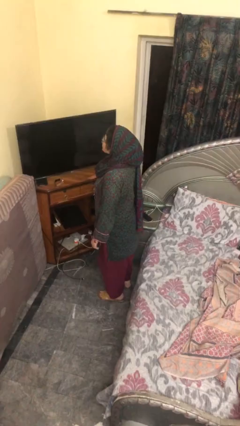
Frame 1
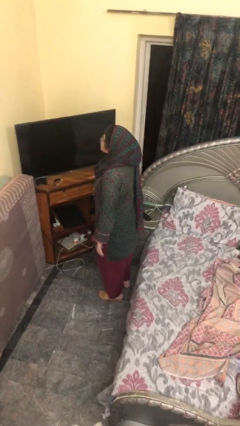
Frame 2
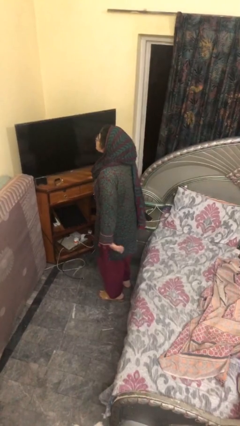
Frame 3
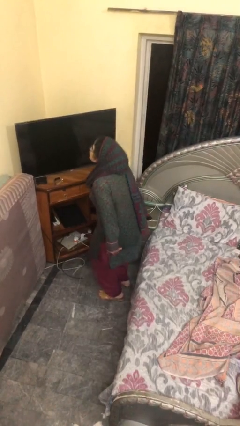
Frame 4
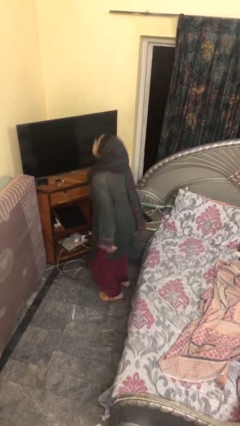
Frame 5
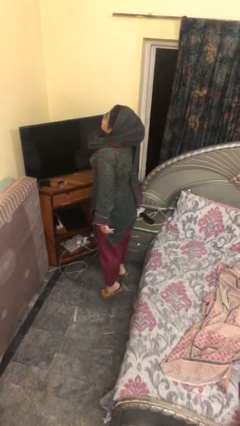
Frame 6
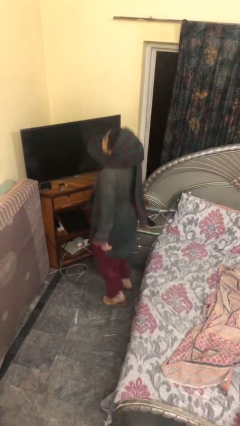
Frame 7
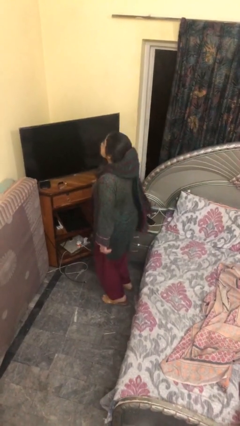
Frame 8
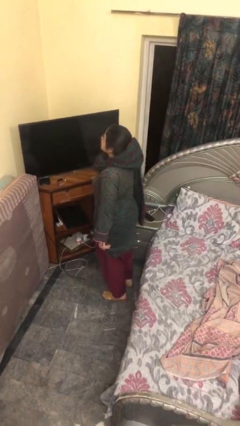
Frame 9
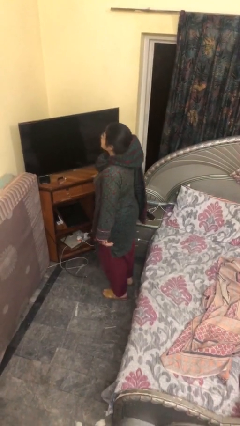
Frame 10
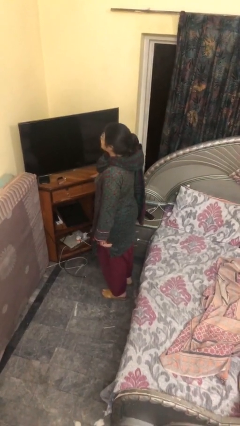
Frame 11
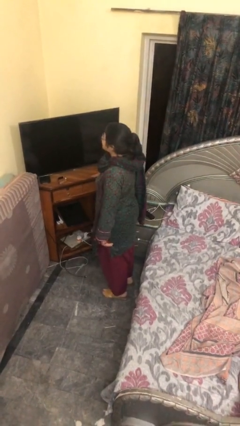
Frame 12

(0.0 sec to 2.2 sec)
person jumps

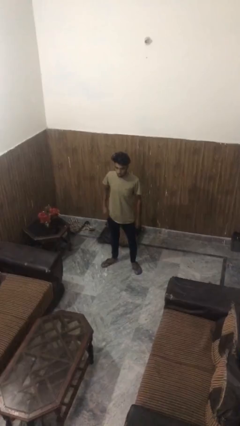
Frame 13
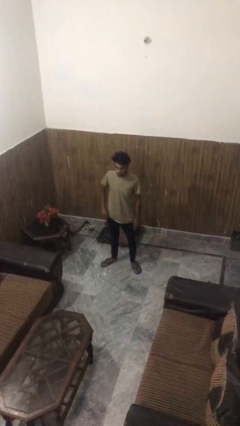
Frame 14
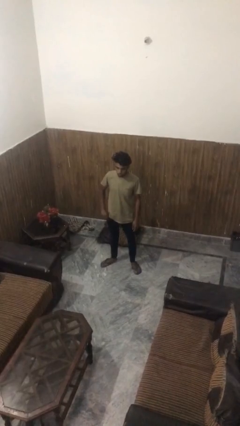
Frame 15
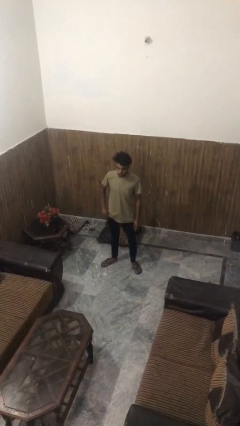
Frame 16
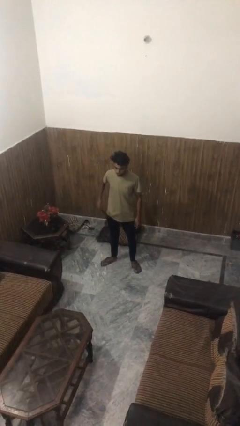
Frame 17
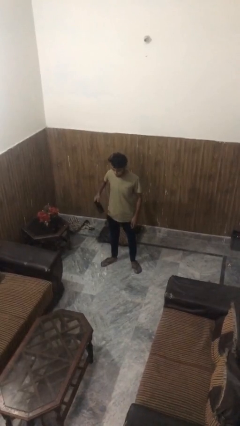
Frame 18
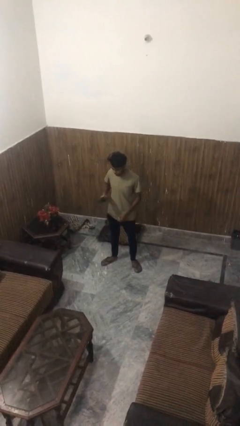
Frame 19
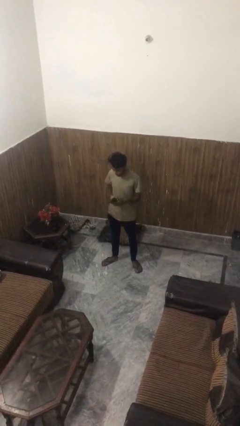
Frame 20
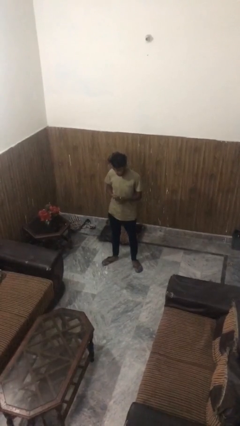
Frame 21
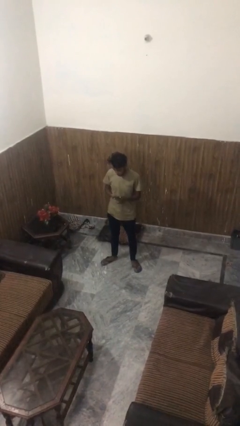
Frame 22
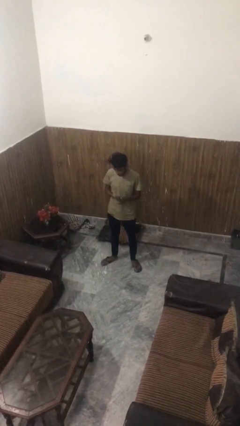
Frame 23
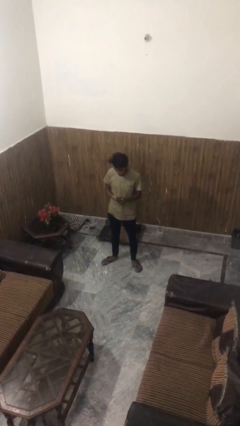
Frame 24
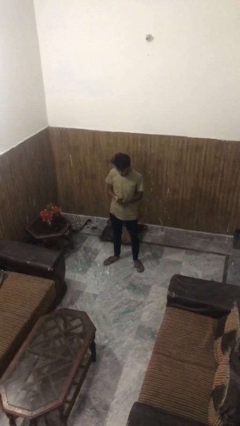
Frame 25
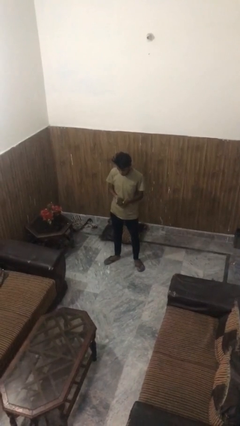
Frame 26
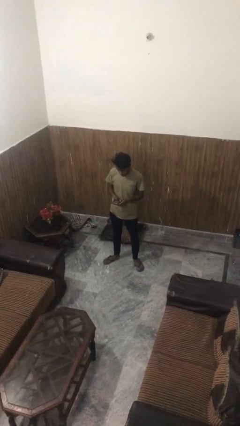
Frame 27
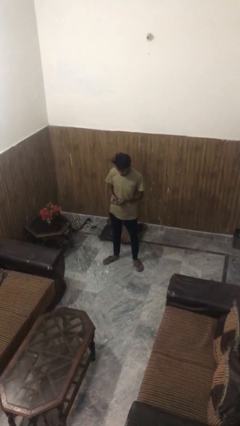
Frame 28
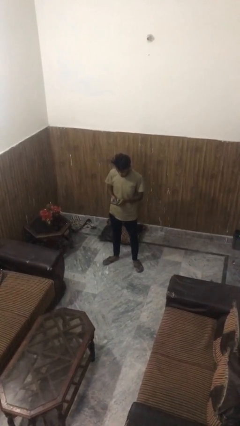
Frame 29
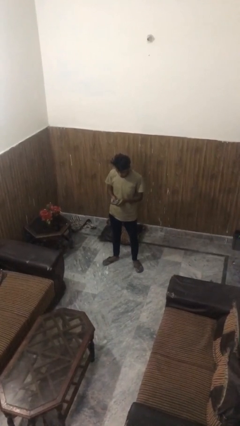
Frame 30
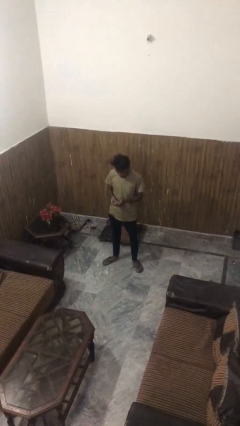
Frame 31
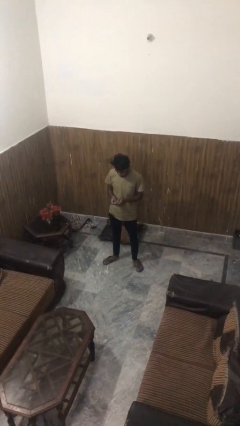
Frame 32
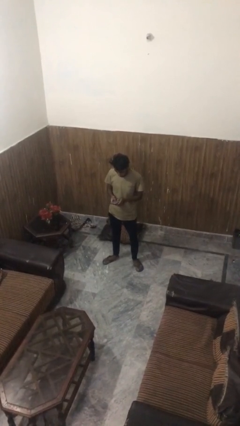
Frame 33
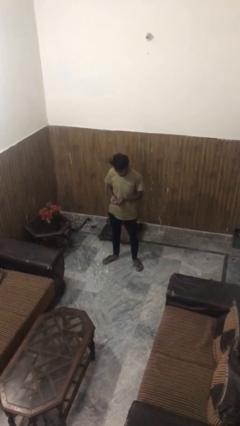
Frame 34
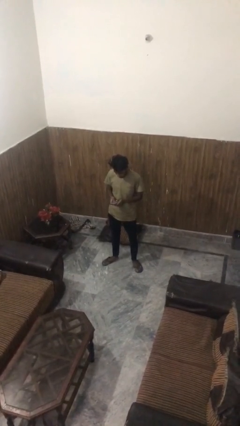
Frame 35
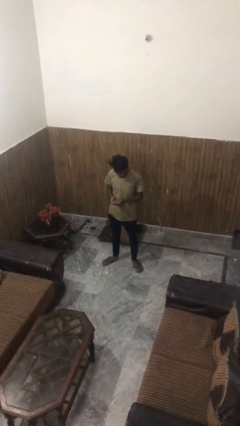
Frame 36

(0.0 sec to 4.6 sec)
person takes phone from pocket

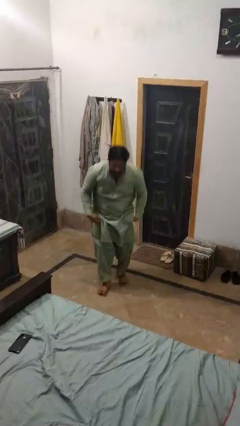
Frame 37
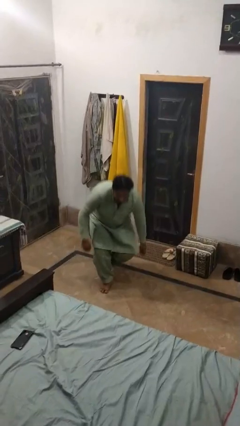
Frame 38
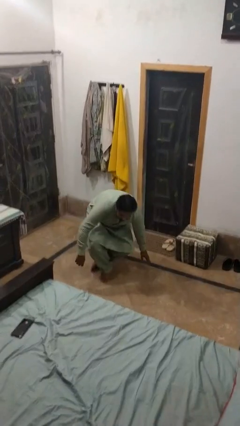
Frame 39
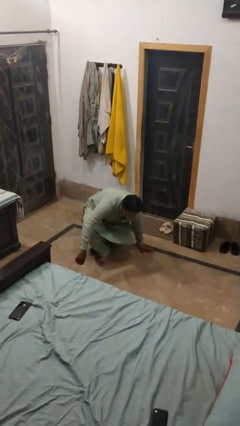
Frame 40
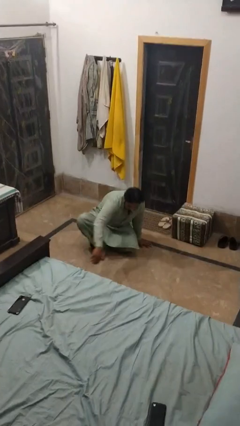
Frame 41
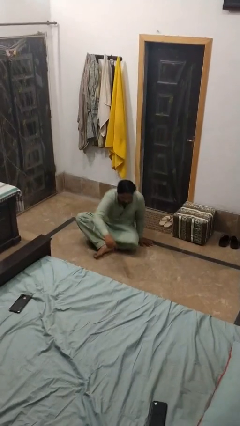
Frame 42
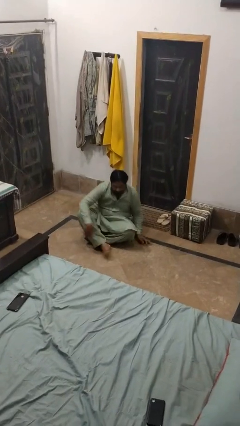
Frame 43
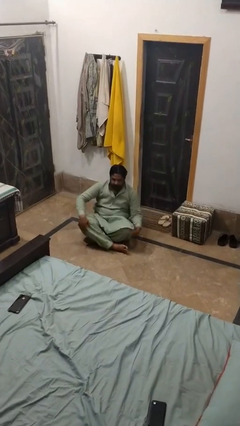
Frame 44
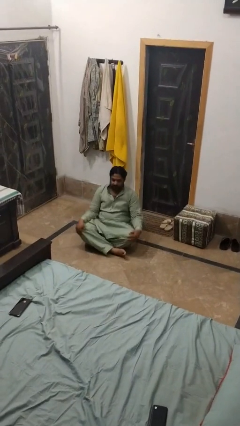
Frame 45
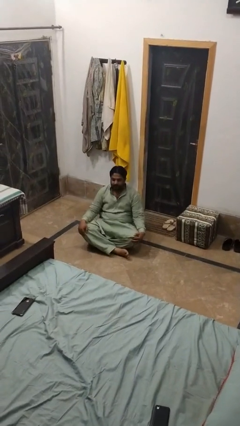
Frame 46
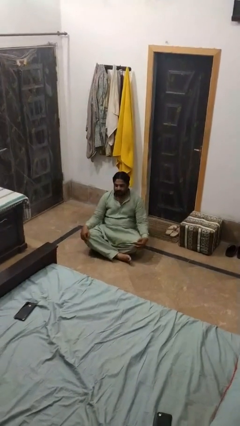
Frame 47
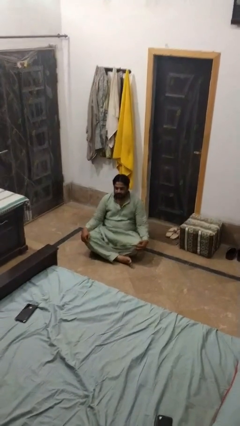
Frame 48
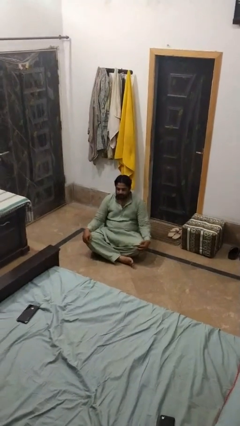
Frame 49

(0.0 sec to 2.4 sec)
person sits crisscross

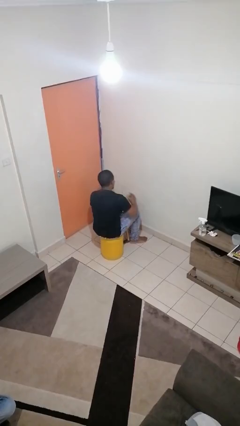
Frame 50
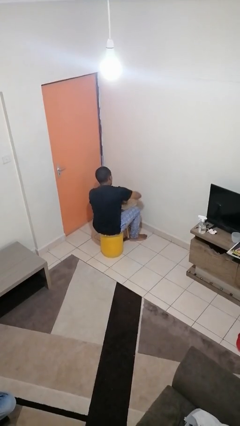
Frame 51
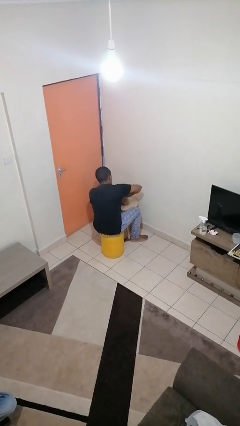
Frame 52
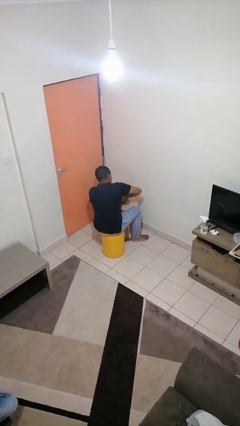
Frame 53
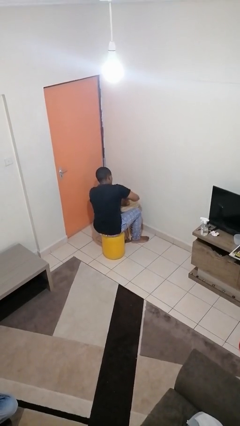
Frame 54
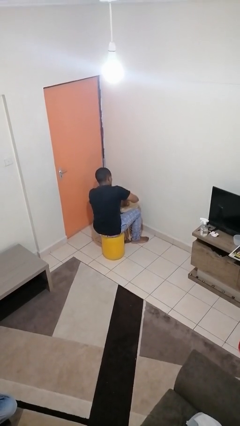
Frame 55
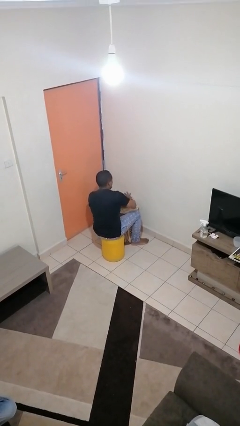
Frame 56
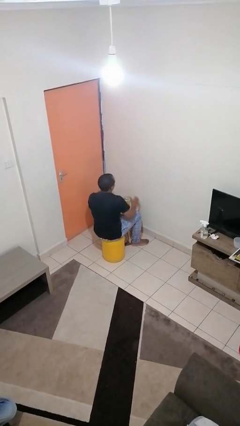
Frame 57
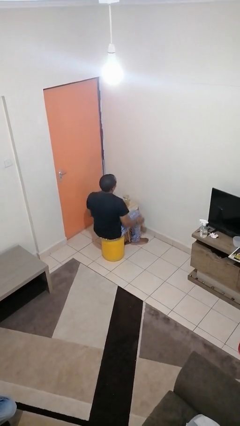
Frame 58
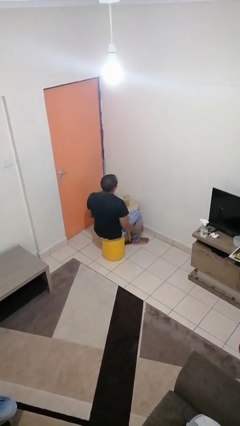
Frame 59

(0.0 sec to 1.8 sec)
person closes jar

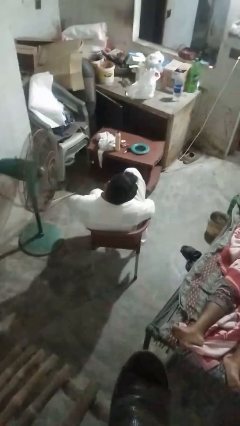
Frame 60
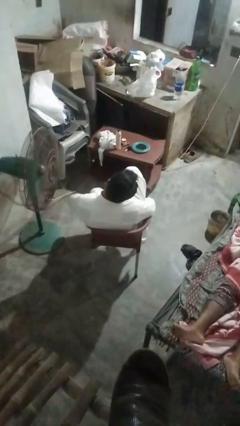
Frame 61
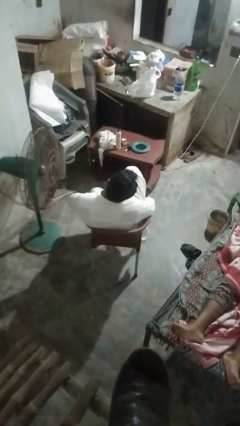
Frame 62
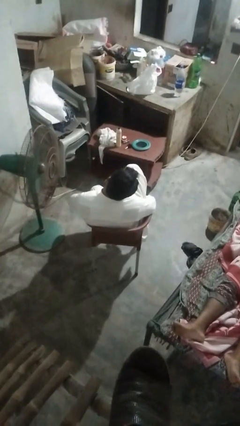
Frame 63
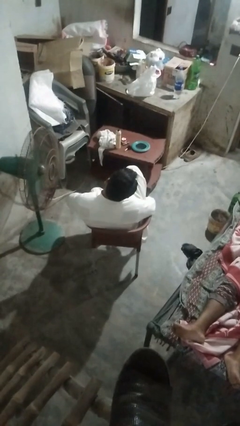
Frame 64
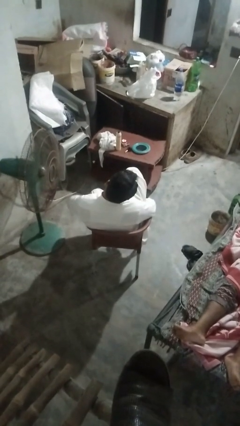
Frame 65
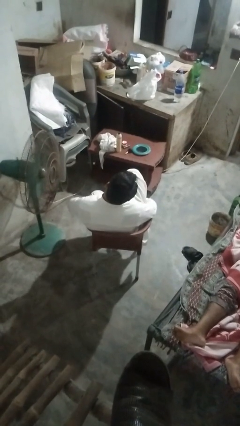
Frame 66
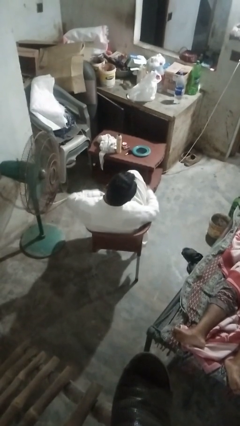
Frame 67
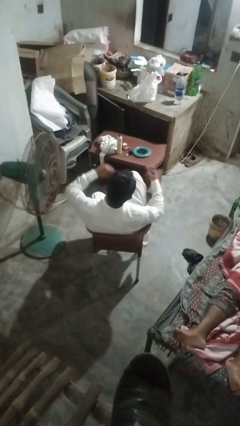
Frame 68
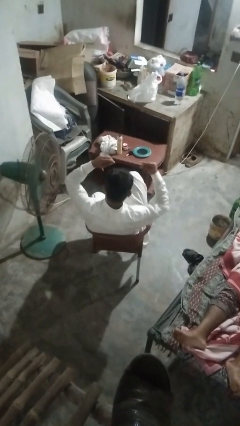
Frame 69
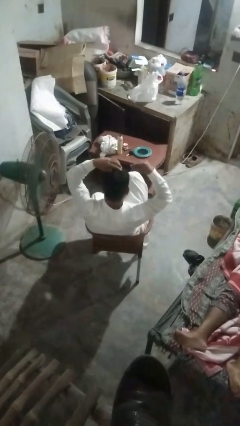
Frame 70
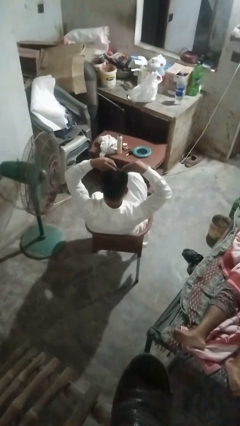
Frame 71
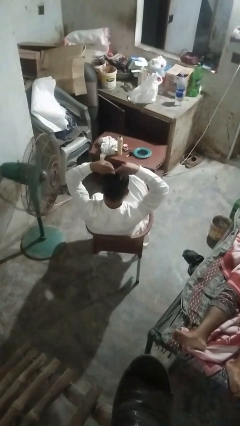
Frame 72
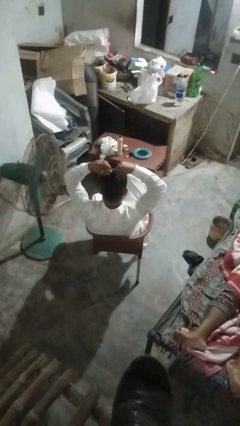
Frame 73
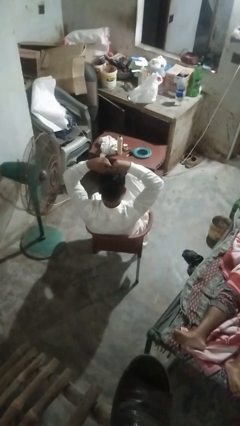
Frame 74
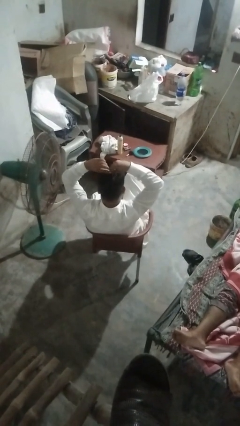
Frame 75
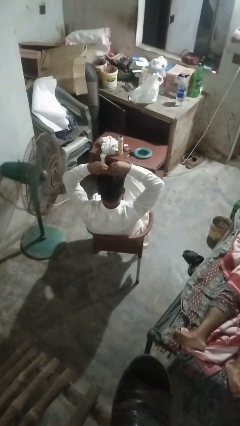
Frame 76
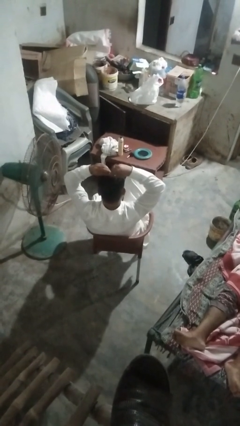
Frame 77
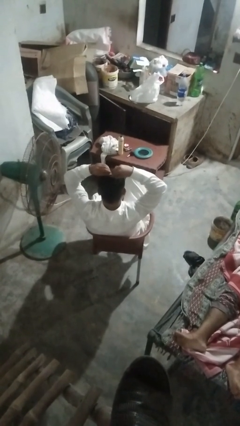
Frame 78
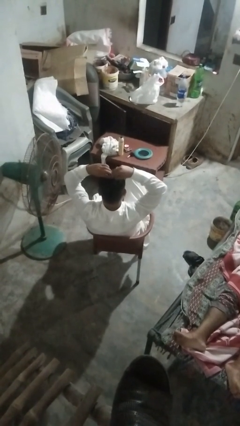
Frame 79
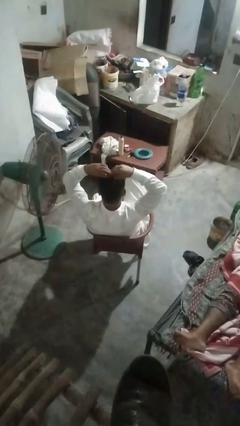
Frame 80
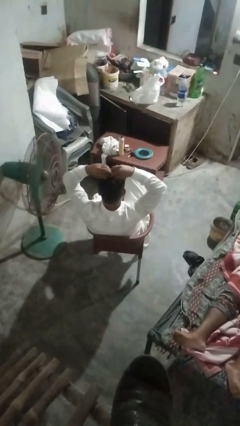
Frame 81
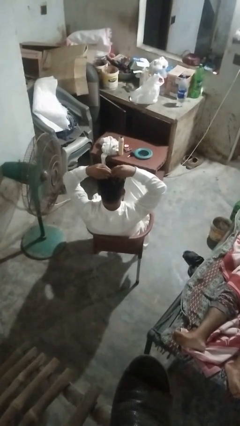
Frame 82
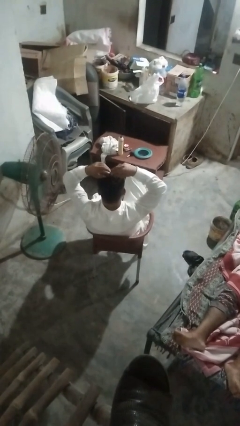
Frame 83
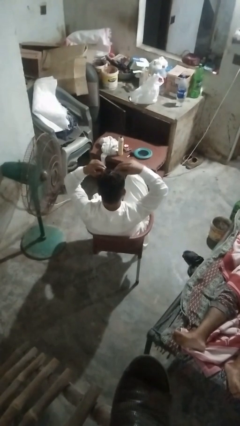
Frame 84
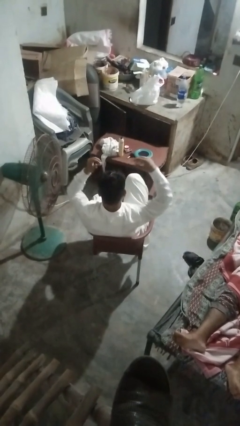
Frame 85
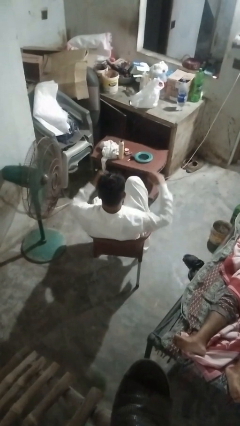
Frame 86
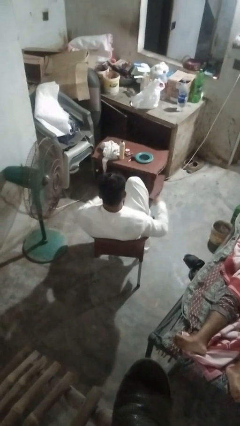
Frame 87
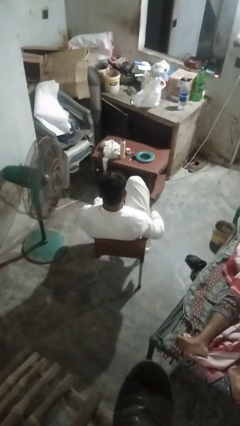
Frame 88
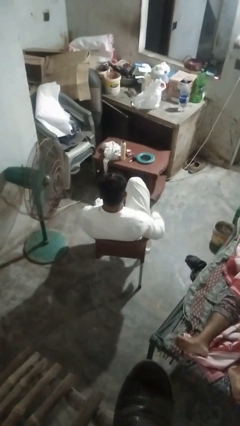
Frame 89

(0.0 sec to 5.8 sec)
person puts hair in ponytail

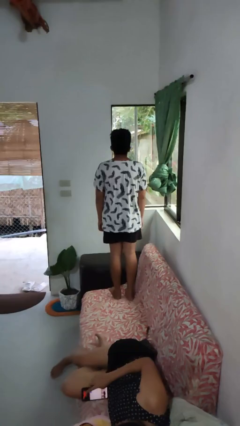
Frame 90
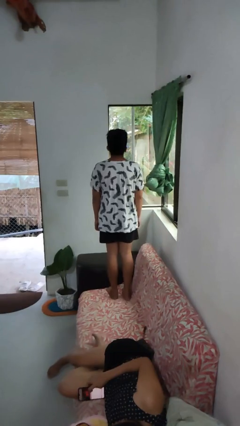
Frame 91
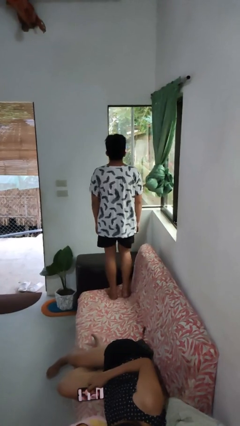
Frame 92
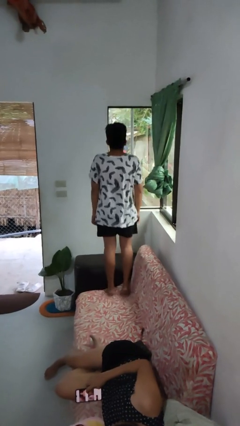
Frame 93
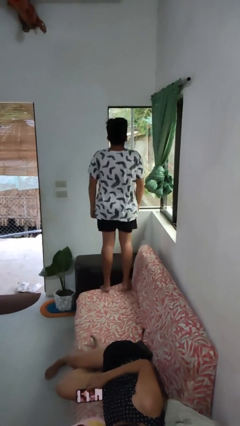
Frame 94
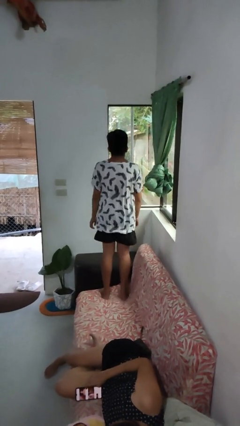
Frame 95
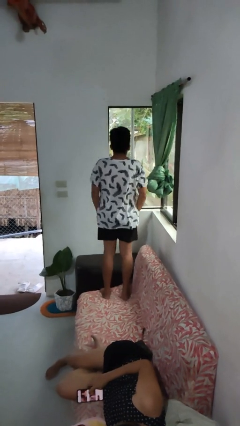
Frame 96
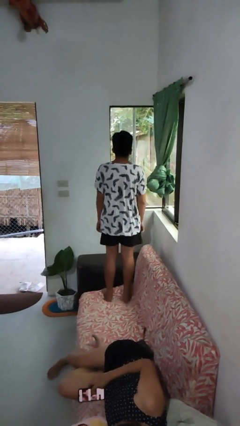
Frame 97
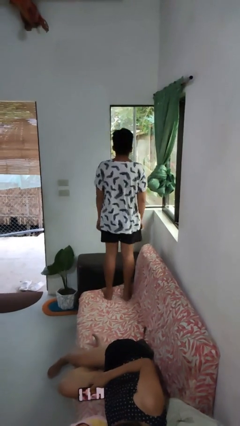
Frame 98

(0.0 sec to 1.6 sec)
person jumps on couch
